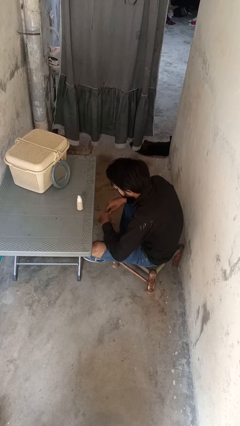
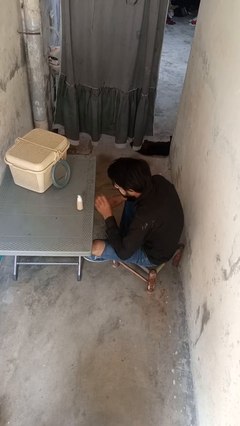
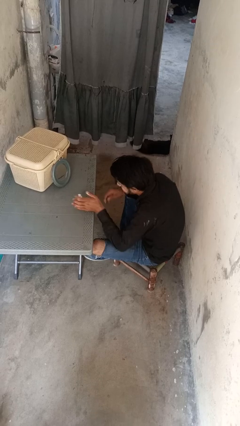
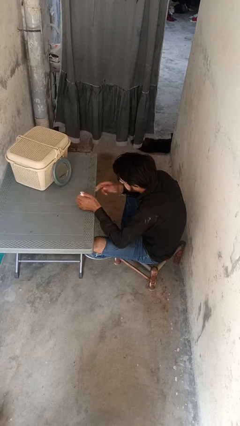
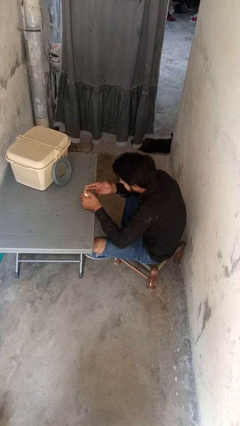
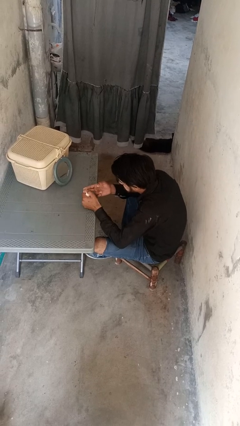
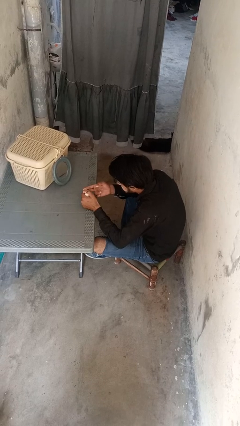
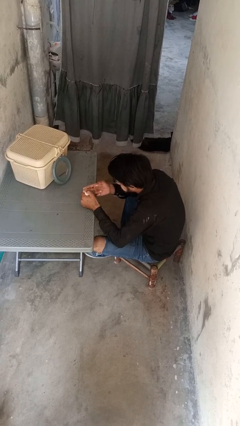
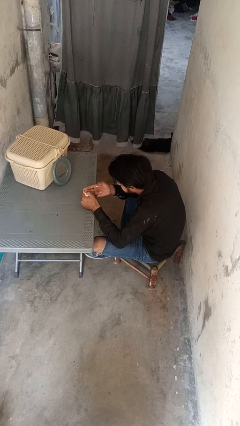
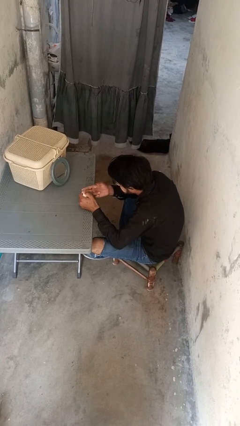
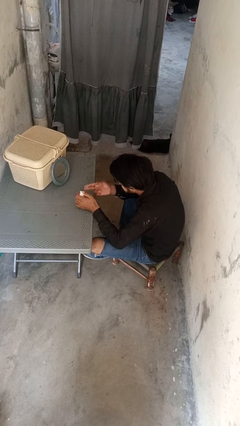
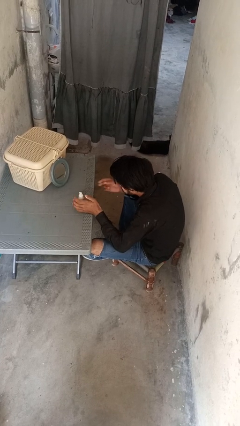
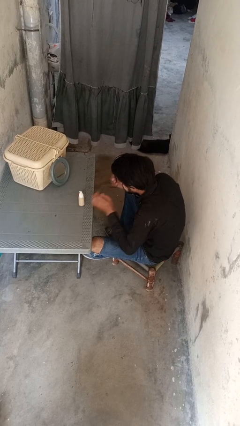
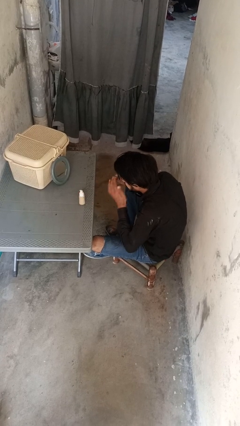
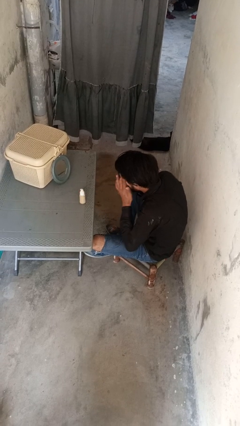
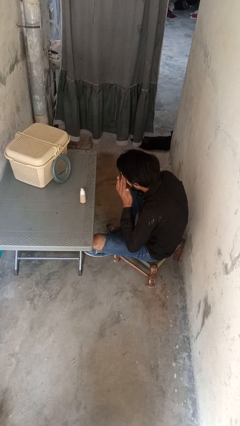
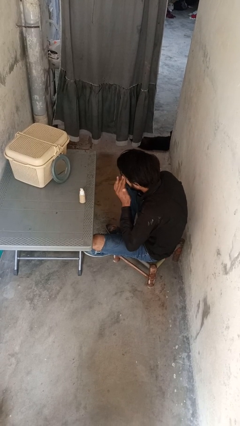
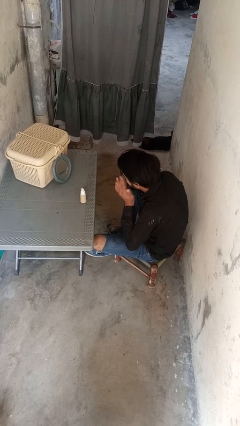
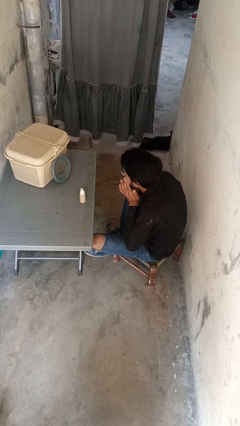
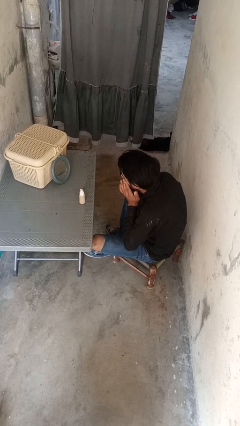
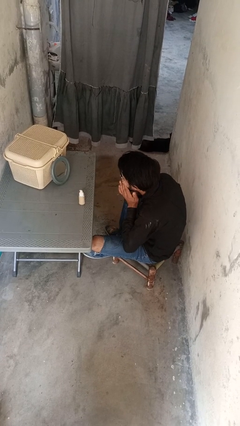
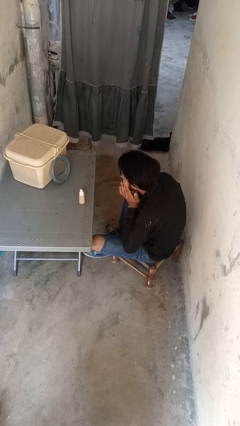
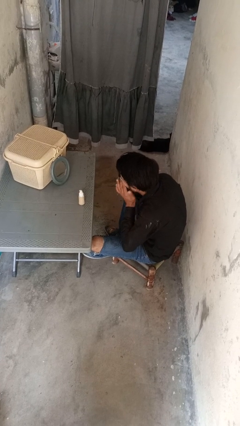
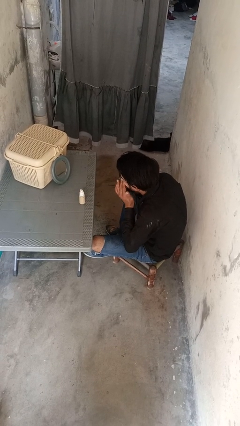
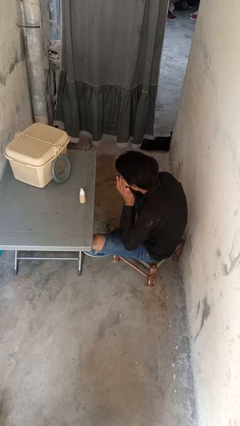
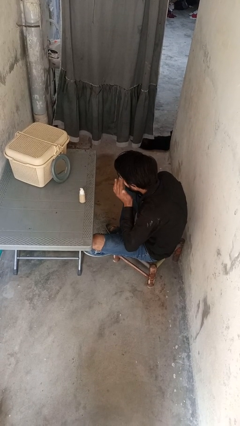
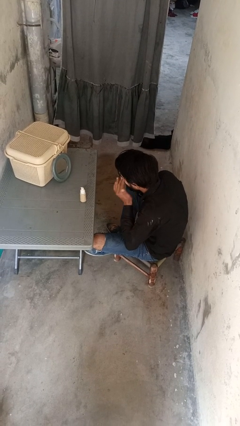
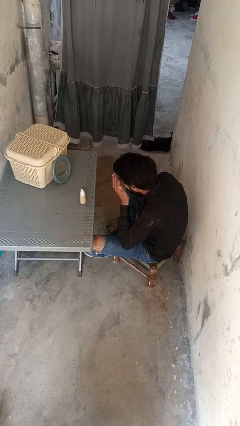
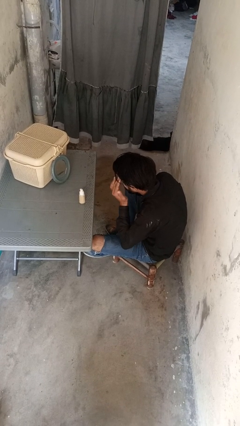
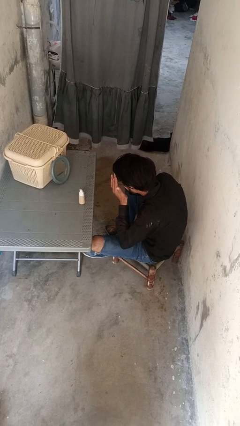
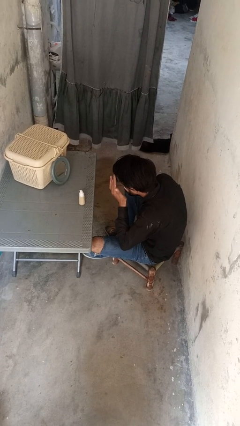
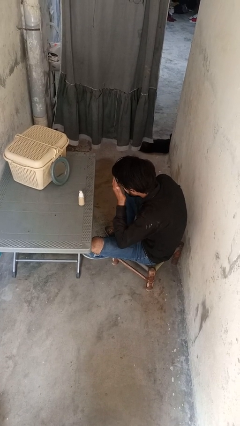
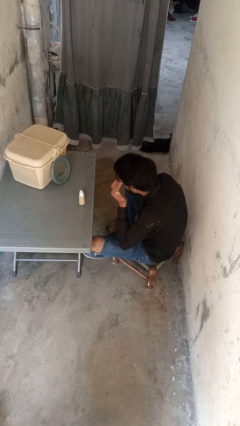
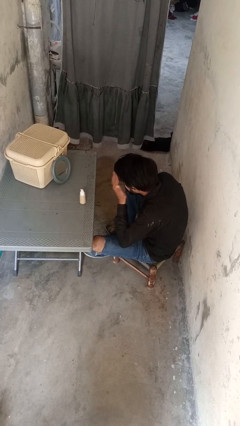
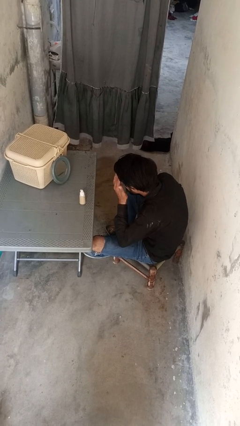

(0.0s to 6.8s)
person applies foundation makeup

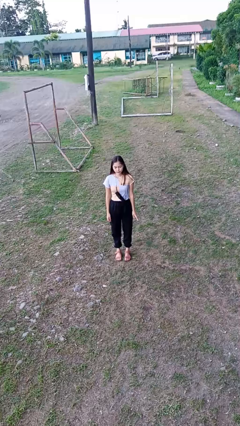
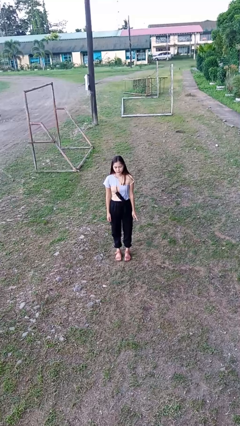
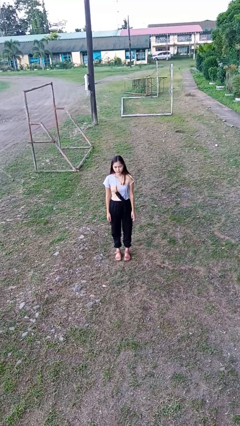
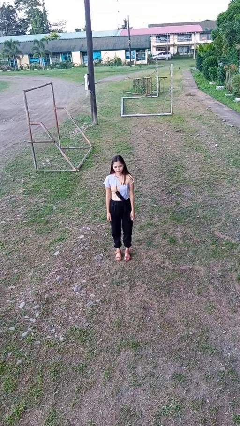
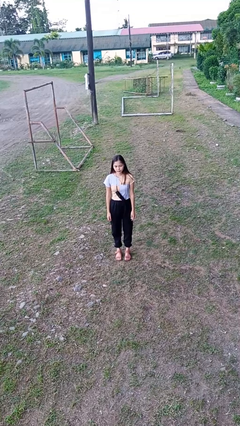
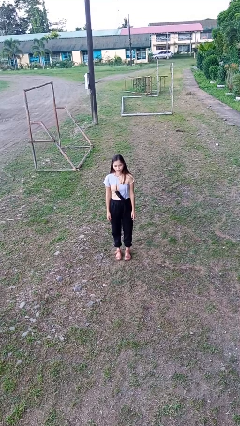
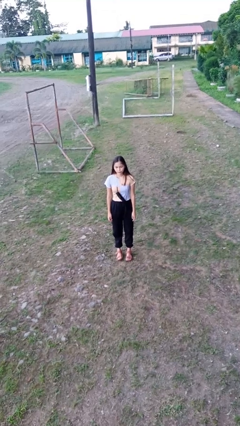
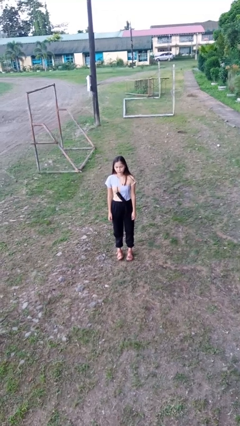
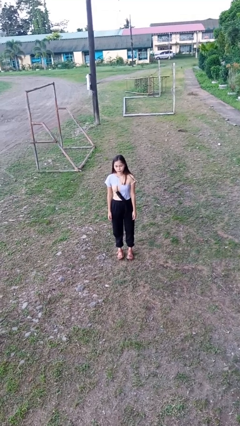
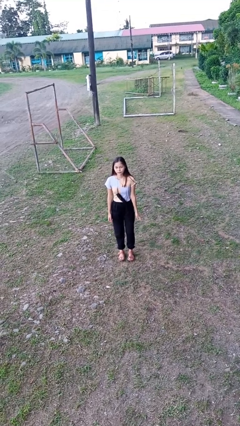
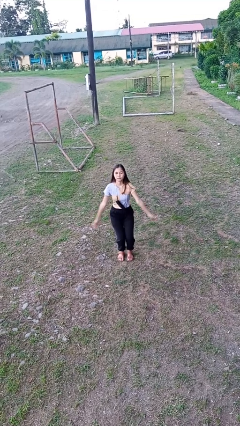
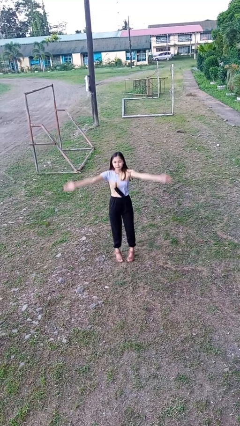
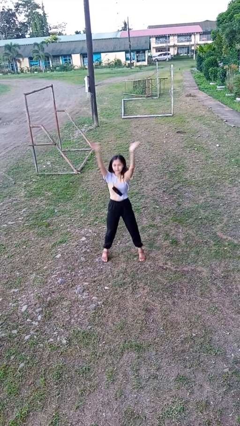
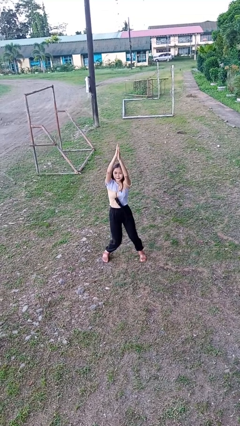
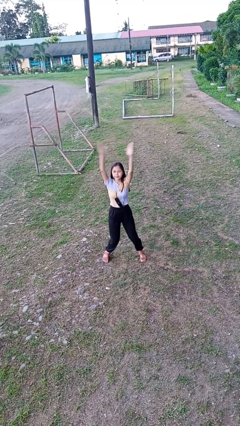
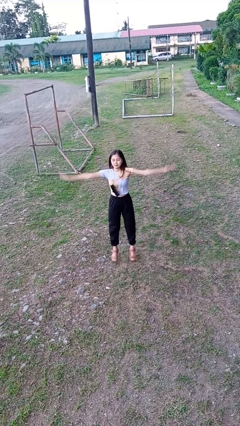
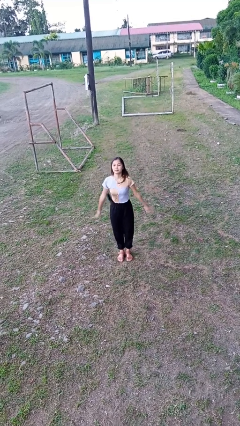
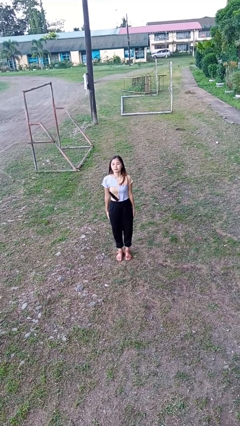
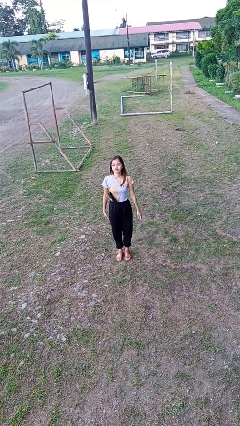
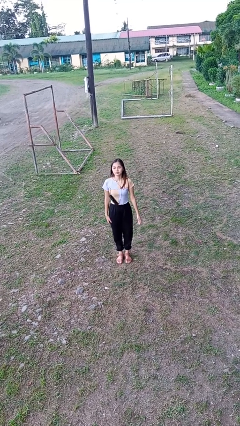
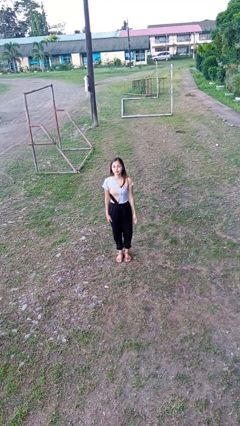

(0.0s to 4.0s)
person exercises with jumping jacks

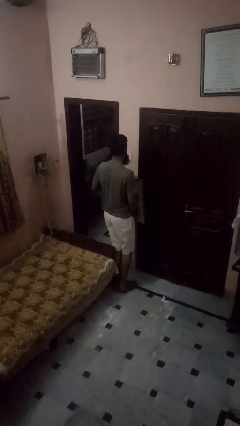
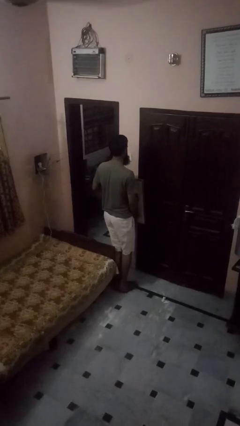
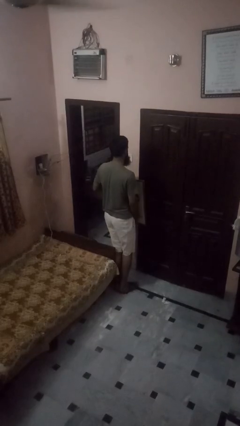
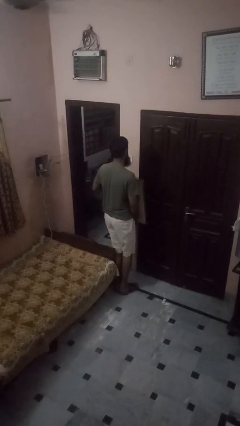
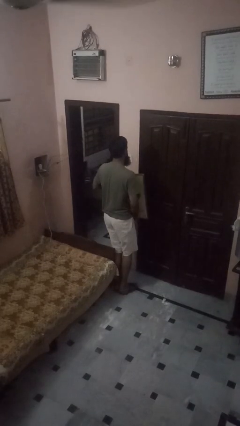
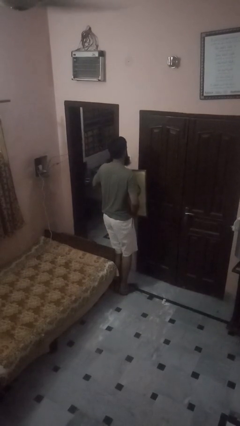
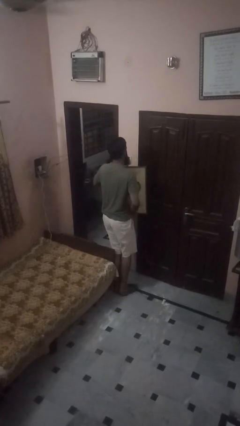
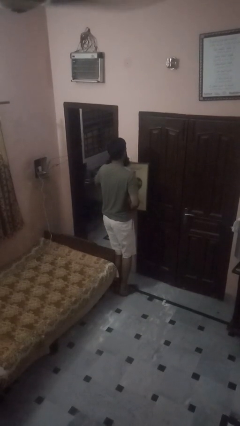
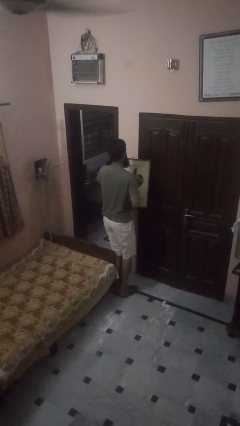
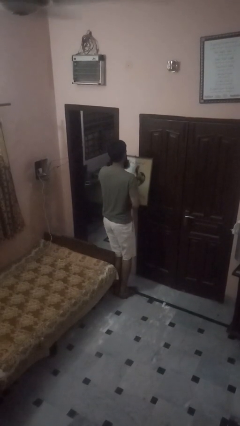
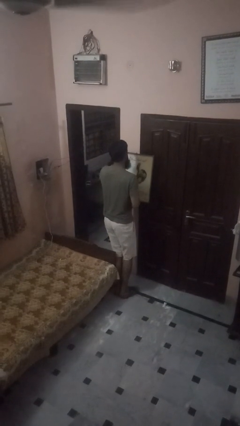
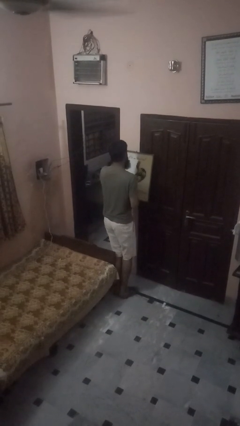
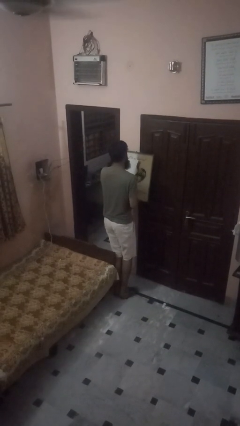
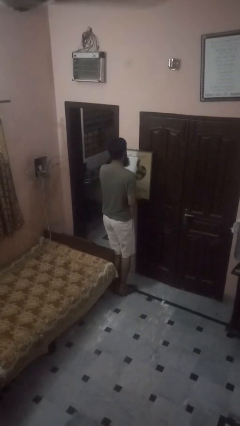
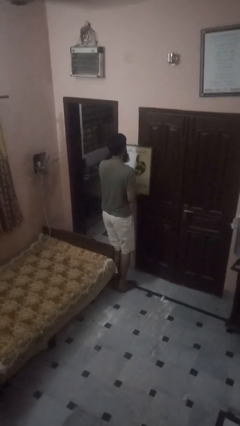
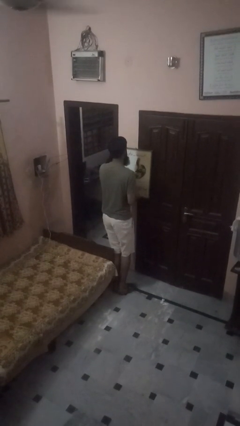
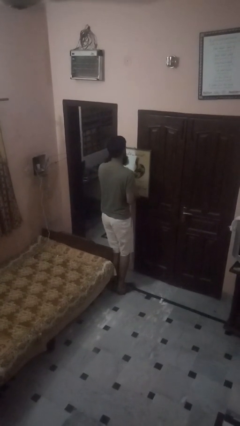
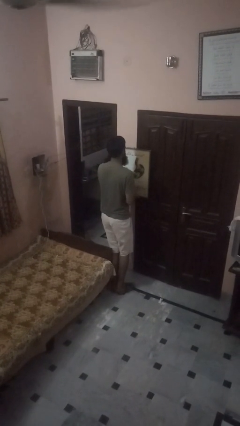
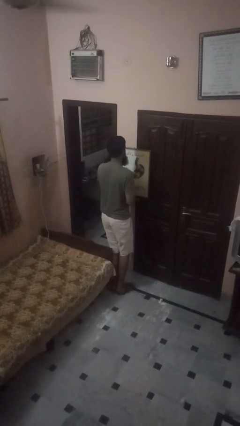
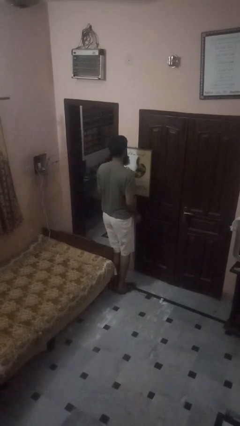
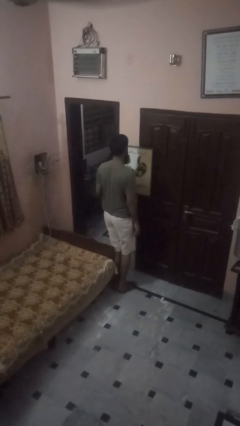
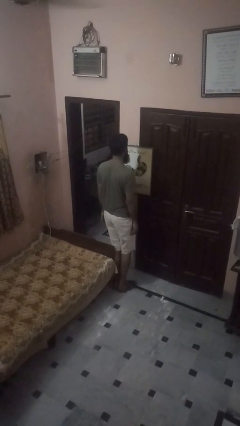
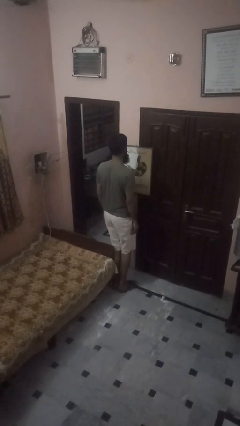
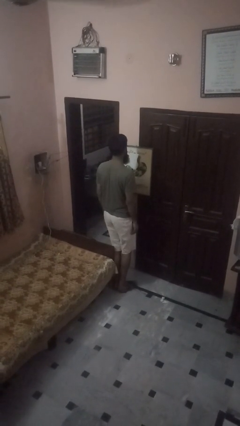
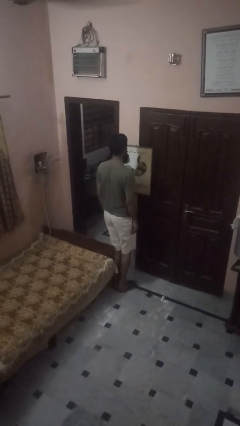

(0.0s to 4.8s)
person puts up picture frame

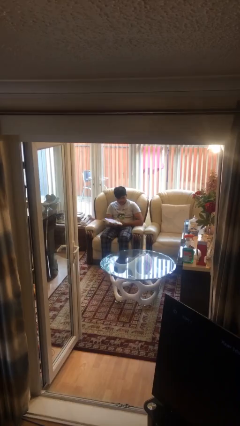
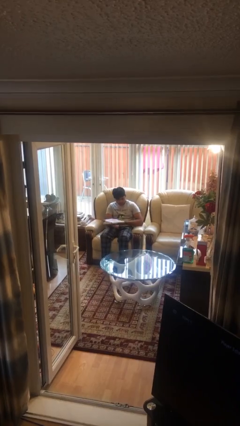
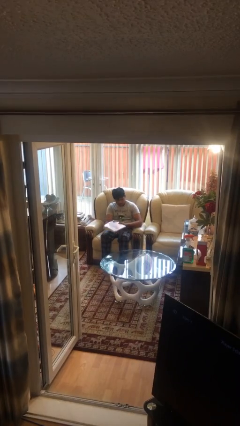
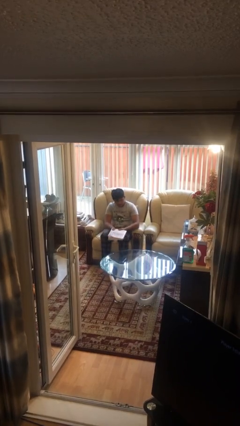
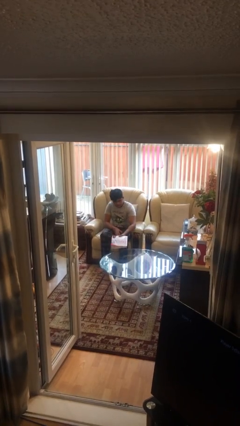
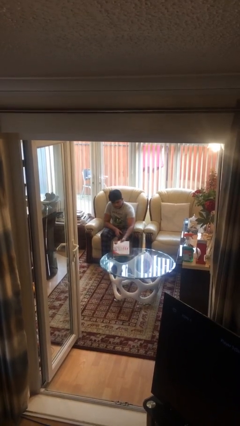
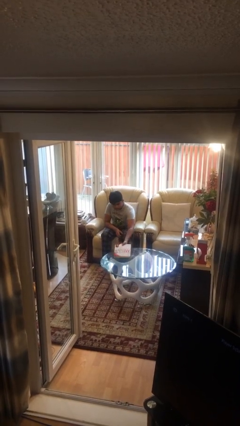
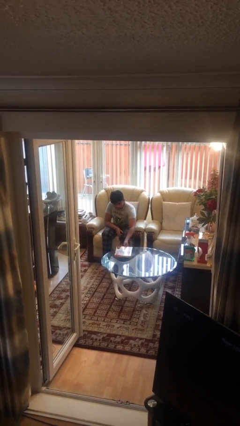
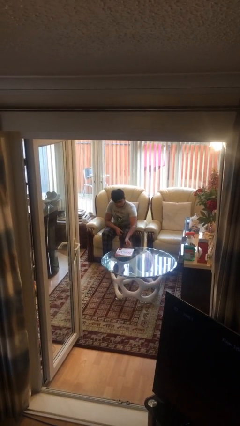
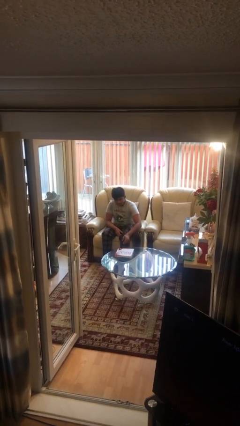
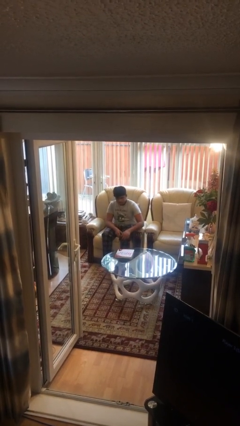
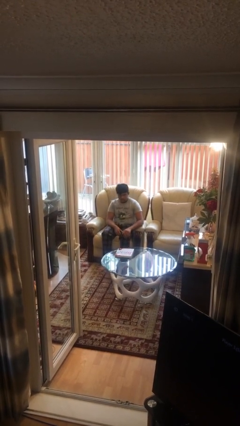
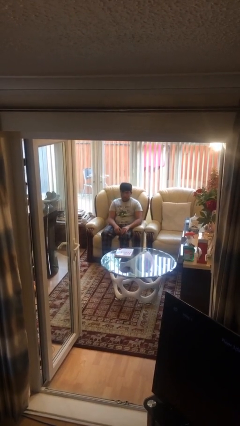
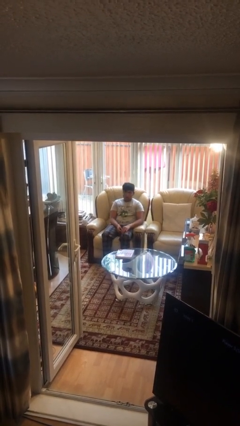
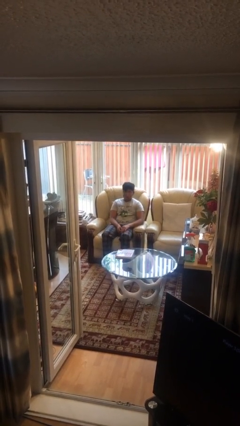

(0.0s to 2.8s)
person puts down object on table
